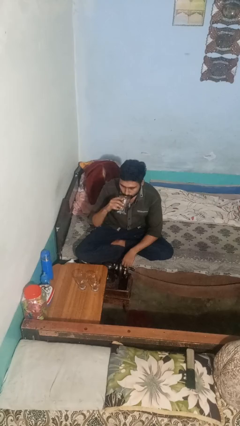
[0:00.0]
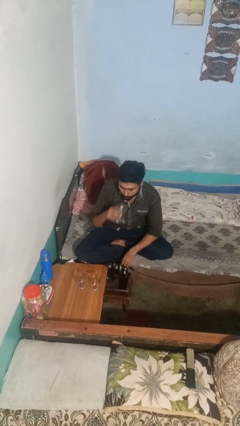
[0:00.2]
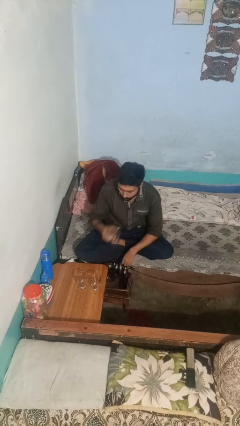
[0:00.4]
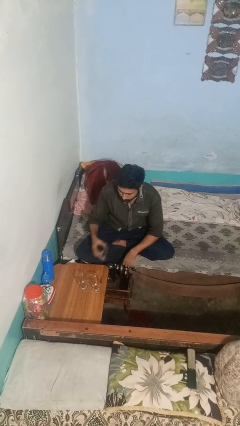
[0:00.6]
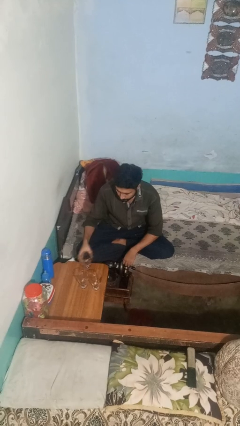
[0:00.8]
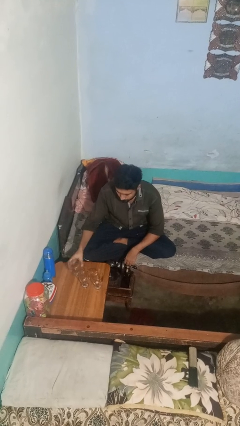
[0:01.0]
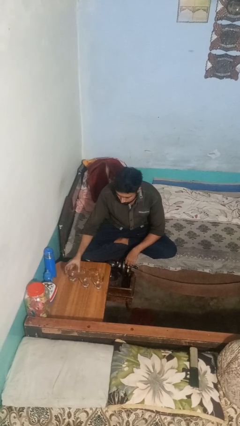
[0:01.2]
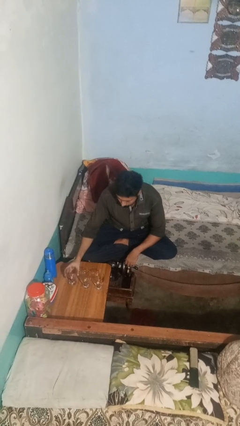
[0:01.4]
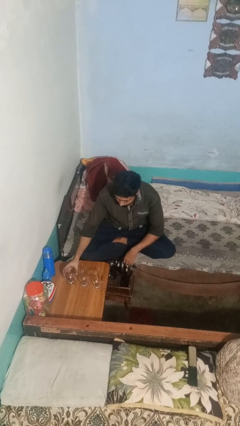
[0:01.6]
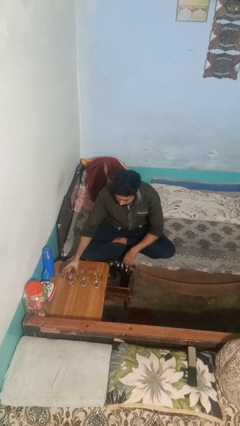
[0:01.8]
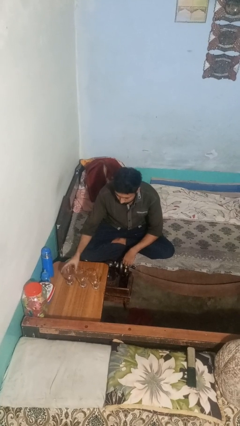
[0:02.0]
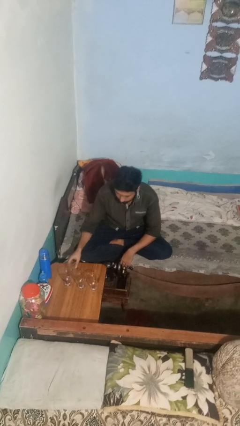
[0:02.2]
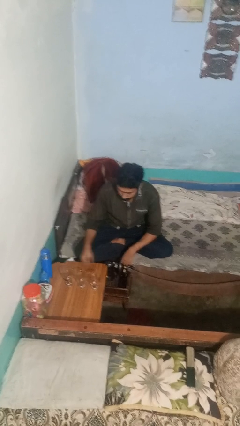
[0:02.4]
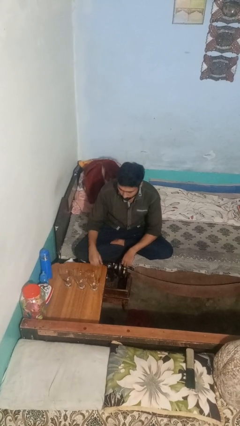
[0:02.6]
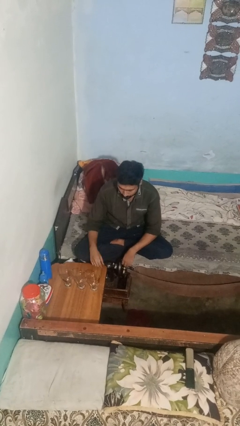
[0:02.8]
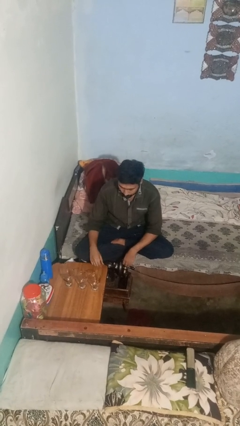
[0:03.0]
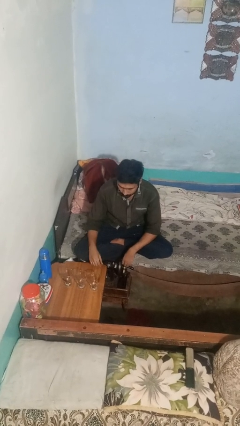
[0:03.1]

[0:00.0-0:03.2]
person puts down object on table

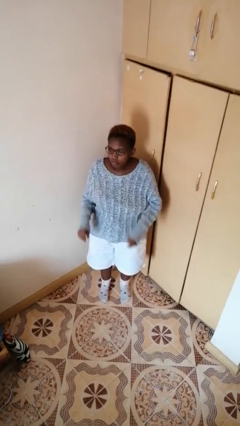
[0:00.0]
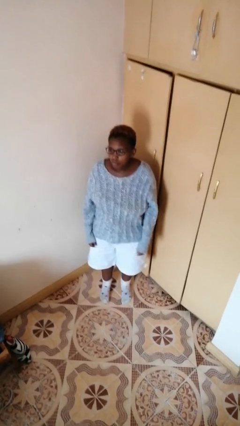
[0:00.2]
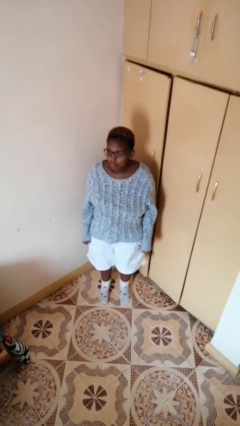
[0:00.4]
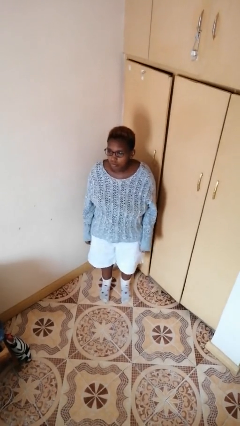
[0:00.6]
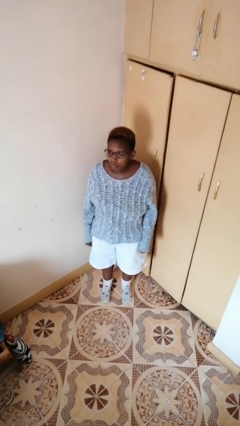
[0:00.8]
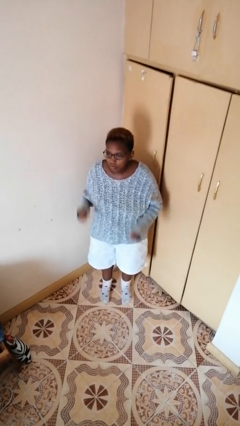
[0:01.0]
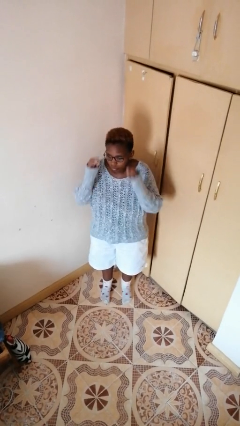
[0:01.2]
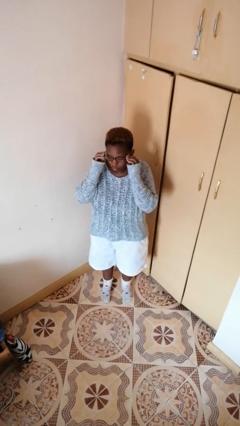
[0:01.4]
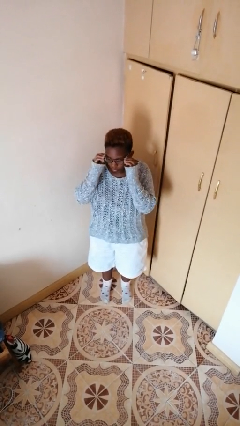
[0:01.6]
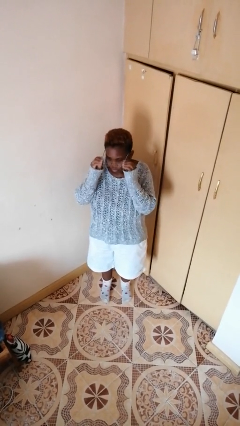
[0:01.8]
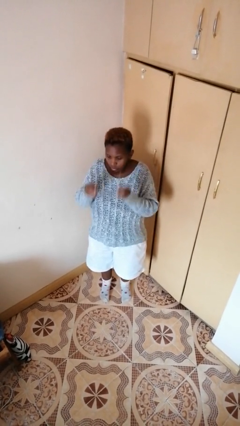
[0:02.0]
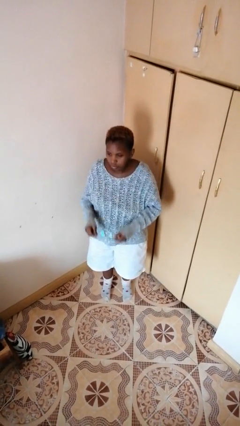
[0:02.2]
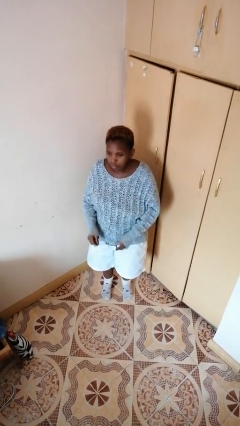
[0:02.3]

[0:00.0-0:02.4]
person takes off glasses

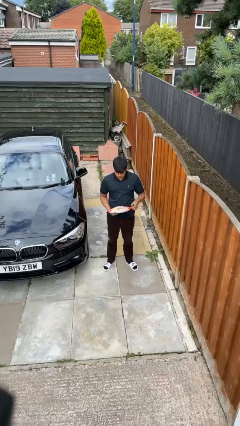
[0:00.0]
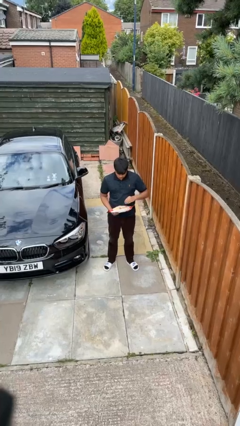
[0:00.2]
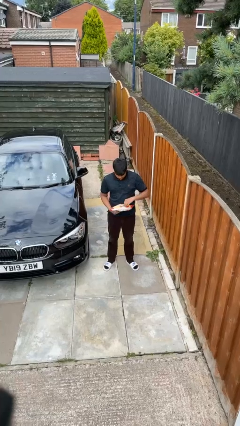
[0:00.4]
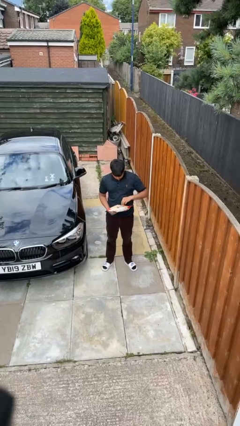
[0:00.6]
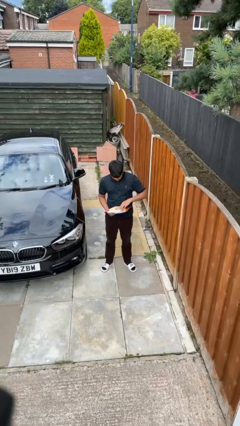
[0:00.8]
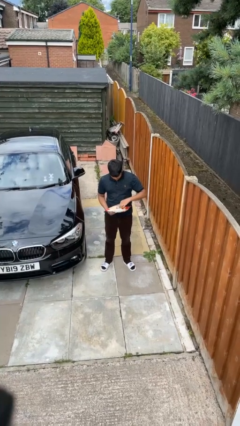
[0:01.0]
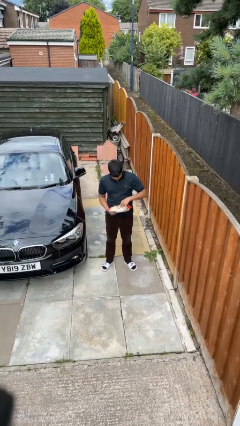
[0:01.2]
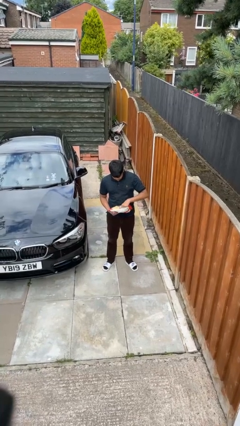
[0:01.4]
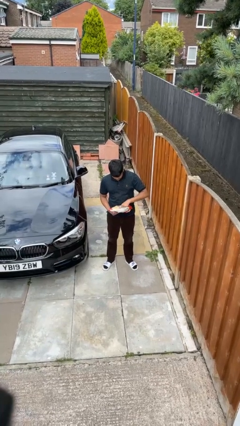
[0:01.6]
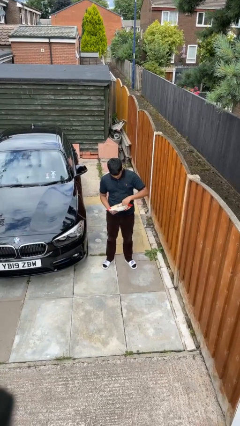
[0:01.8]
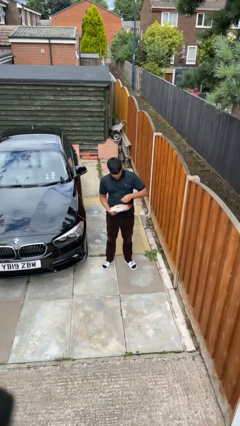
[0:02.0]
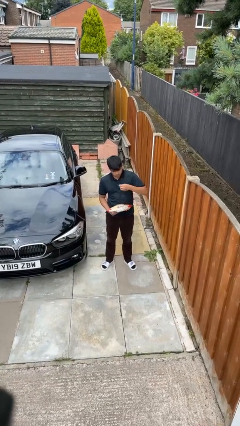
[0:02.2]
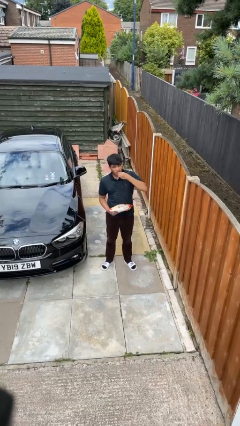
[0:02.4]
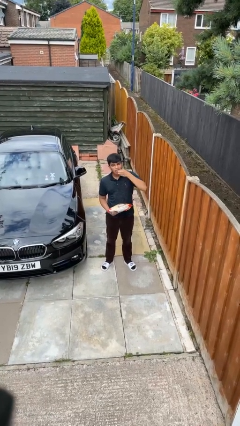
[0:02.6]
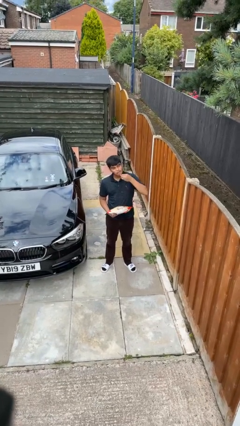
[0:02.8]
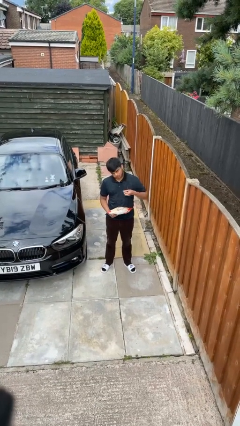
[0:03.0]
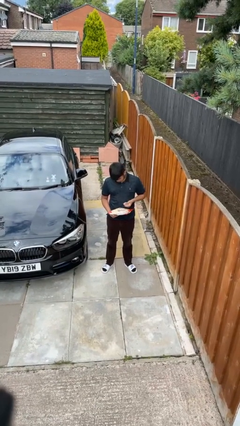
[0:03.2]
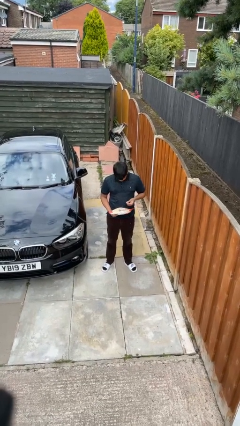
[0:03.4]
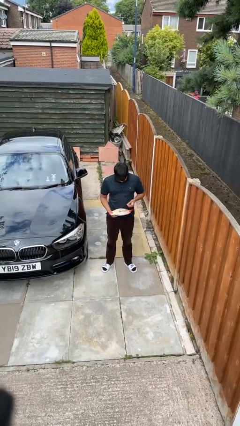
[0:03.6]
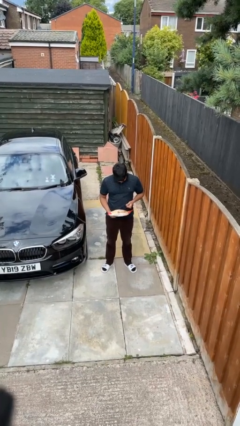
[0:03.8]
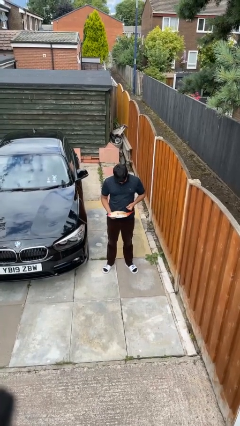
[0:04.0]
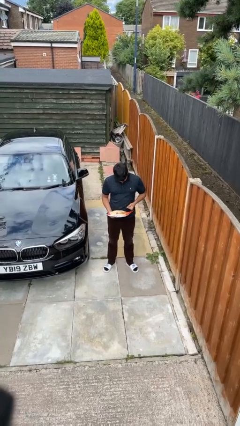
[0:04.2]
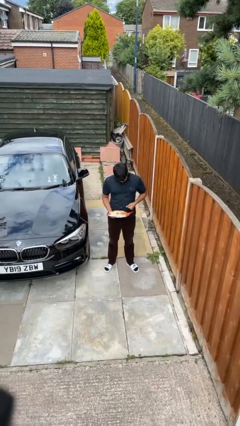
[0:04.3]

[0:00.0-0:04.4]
person eats snack from bag

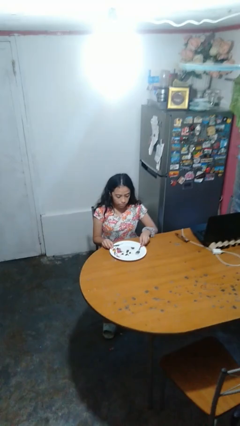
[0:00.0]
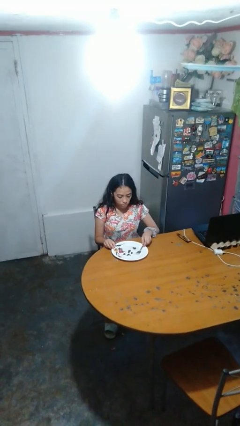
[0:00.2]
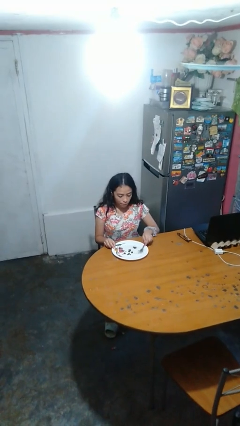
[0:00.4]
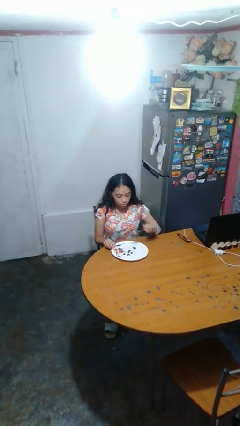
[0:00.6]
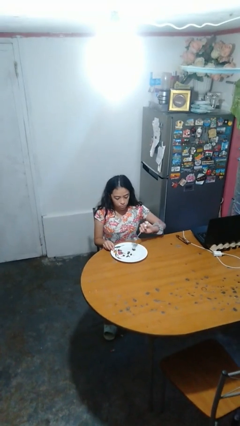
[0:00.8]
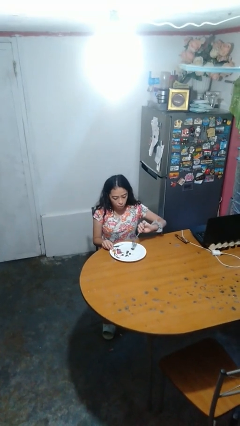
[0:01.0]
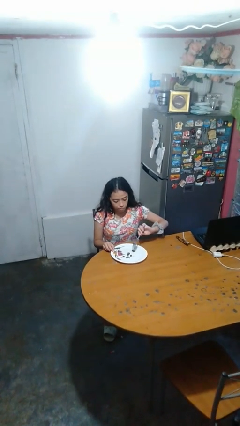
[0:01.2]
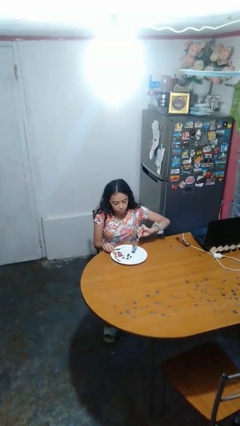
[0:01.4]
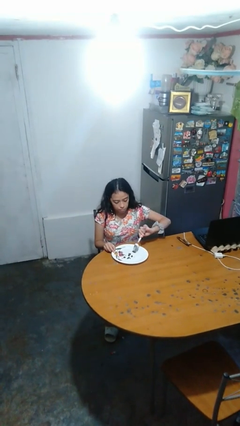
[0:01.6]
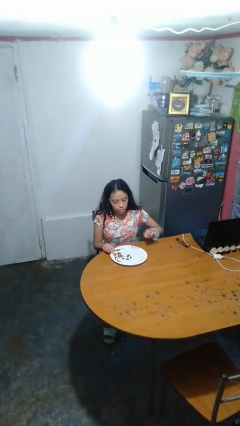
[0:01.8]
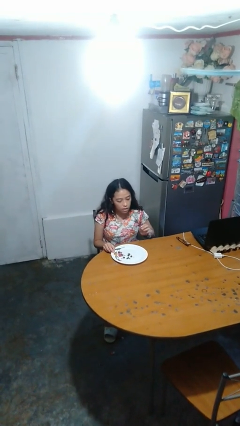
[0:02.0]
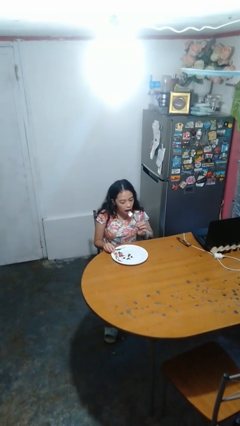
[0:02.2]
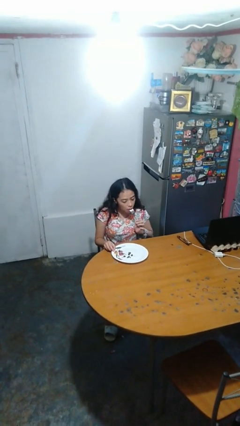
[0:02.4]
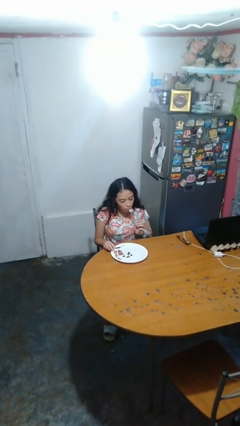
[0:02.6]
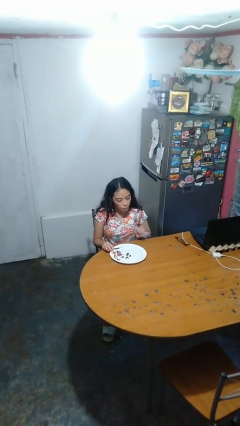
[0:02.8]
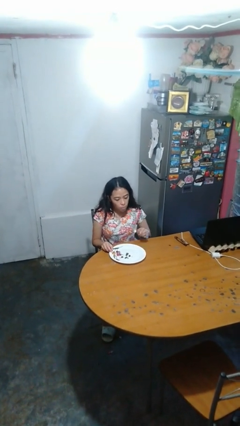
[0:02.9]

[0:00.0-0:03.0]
person eats with utensil

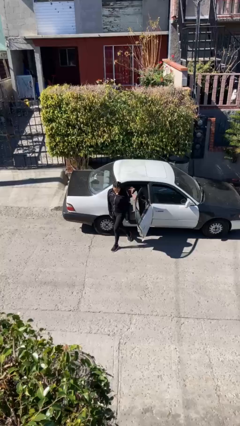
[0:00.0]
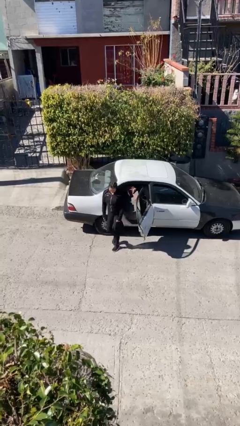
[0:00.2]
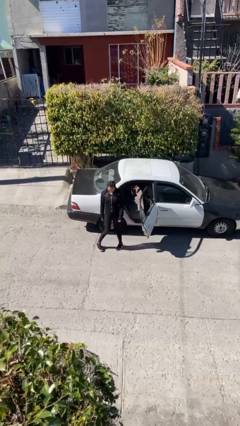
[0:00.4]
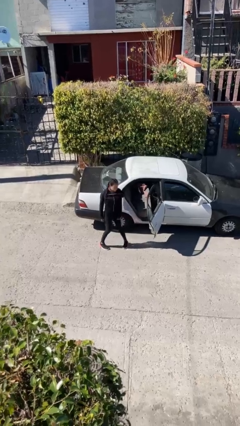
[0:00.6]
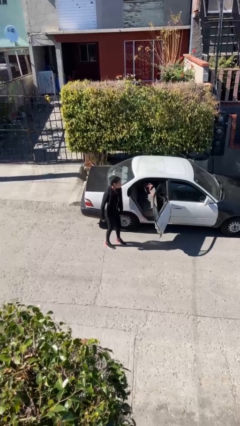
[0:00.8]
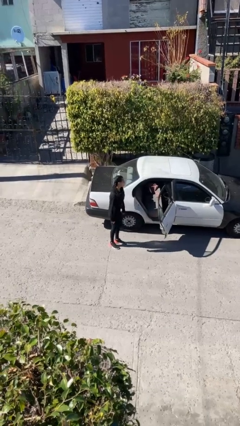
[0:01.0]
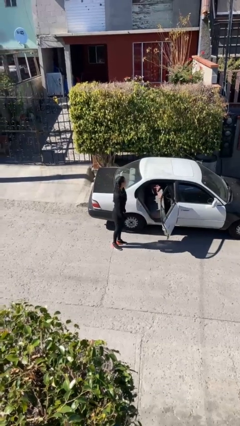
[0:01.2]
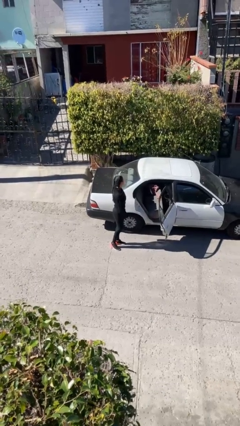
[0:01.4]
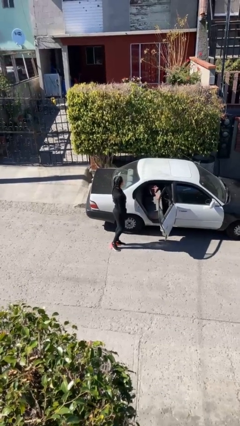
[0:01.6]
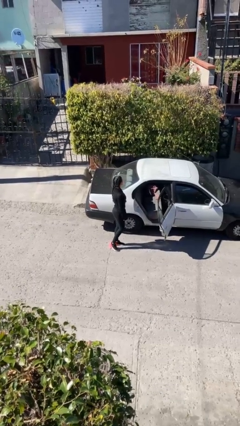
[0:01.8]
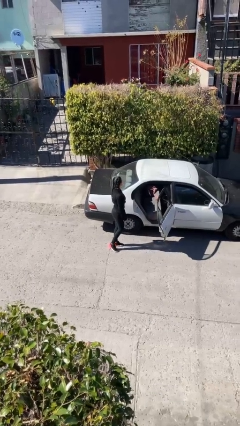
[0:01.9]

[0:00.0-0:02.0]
person exits car

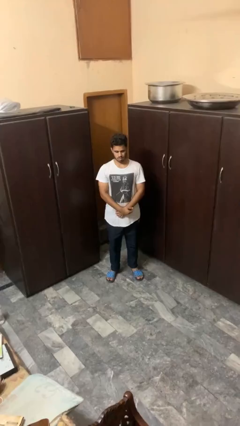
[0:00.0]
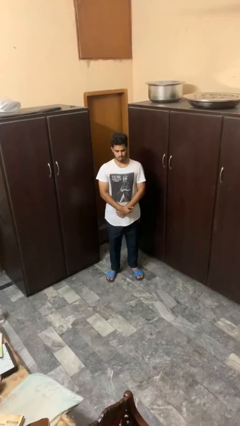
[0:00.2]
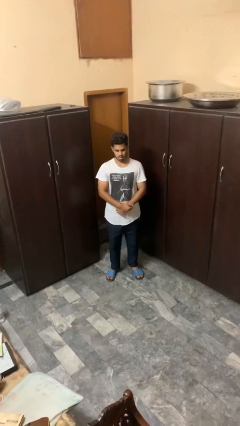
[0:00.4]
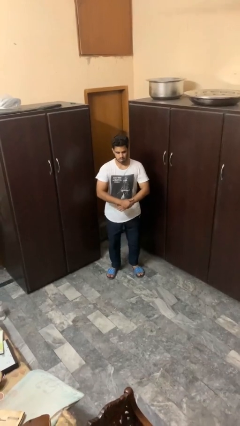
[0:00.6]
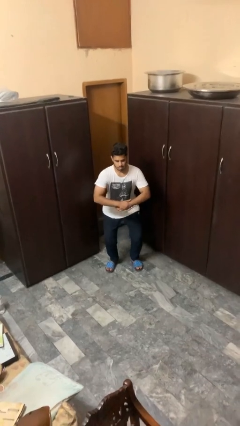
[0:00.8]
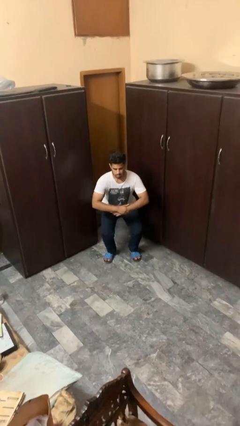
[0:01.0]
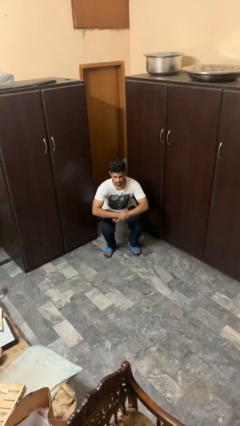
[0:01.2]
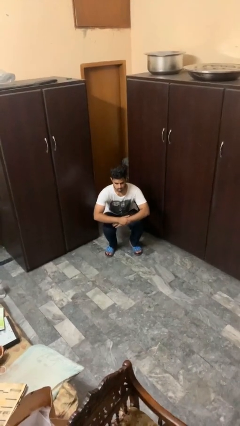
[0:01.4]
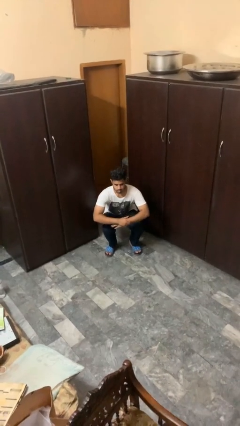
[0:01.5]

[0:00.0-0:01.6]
person squats

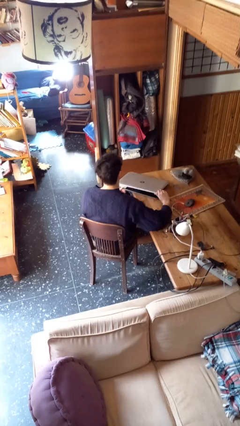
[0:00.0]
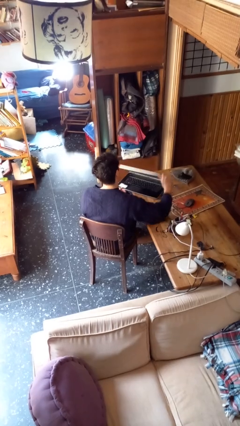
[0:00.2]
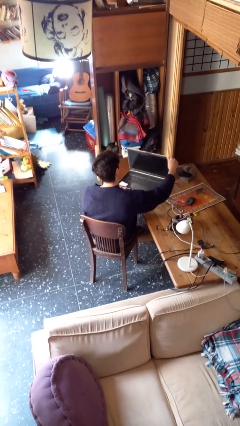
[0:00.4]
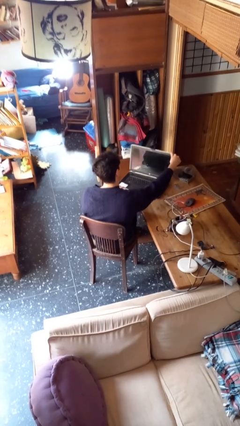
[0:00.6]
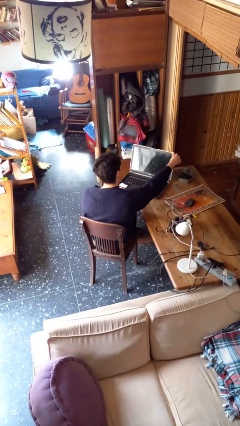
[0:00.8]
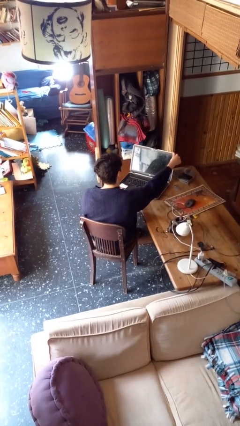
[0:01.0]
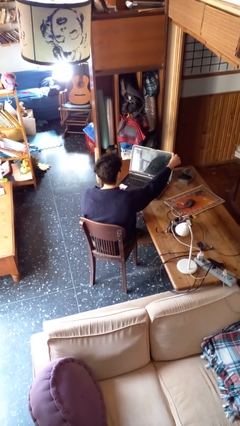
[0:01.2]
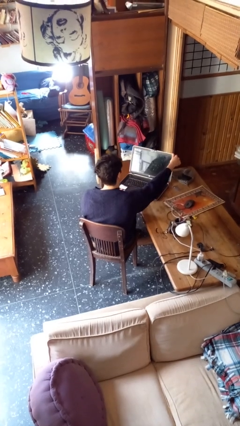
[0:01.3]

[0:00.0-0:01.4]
person opens laptop
